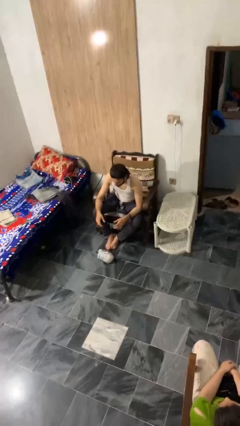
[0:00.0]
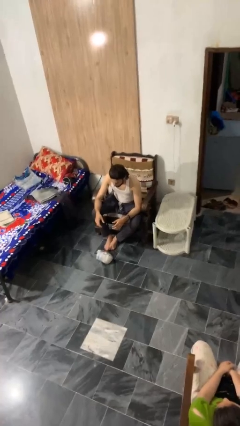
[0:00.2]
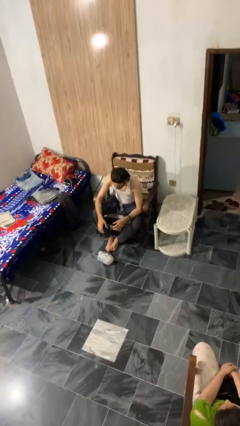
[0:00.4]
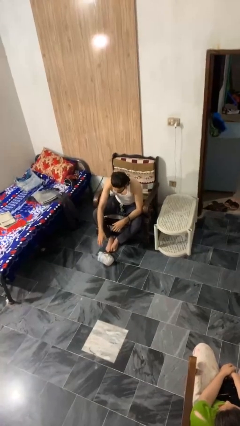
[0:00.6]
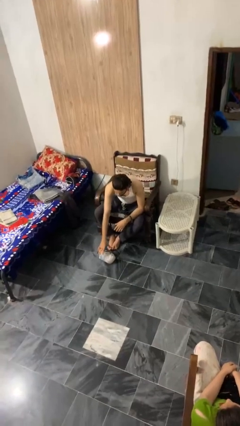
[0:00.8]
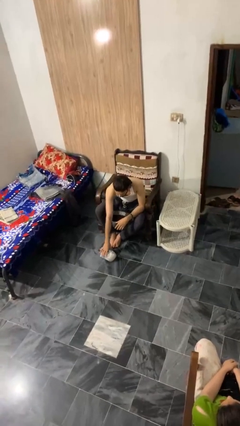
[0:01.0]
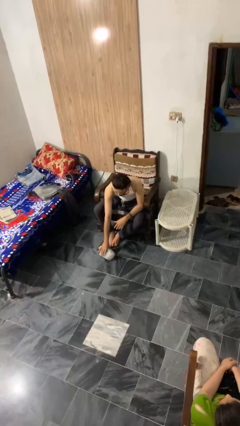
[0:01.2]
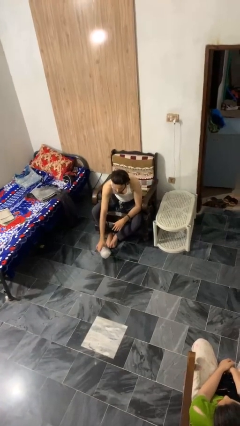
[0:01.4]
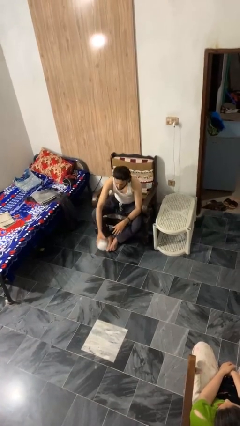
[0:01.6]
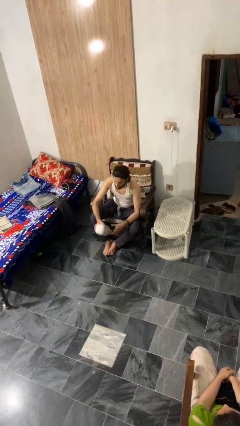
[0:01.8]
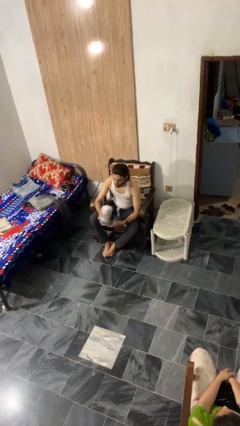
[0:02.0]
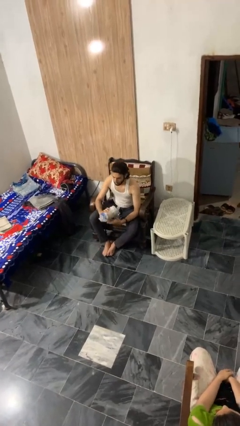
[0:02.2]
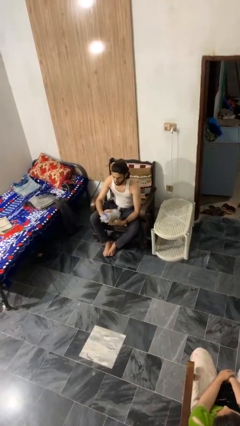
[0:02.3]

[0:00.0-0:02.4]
person picks up object from floor

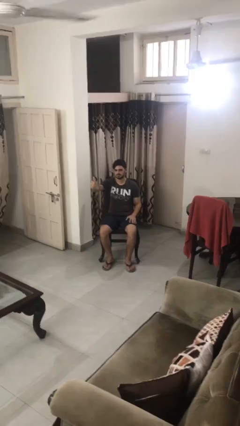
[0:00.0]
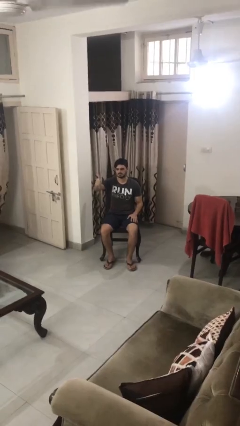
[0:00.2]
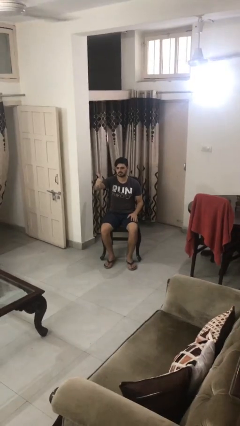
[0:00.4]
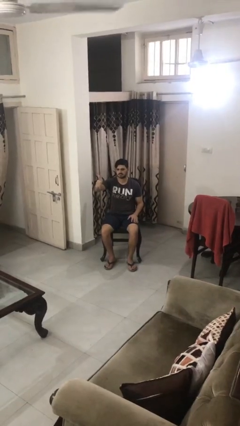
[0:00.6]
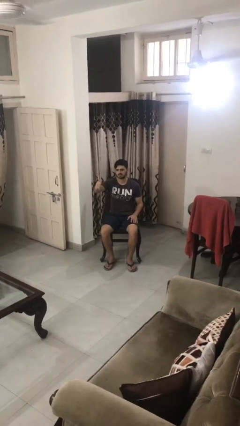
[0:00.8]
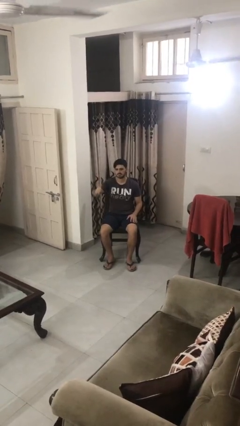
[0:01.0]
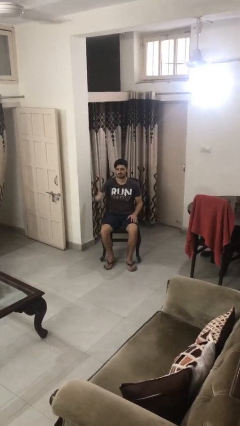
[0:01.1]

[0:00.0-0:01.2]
person gestures thumbs up

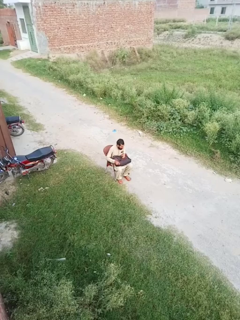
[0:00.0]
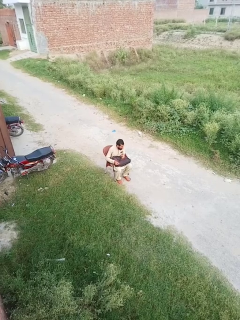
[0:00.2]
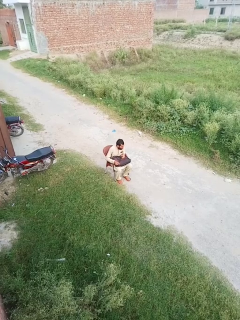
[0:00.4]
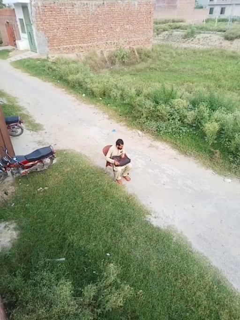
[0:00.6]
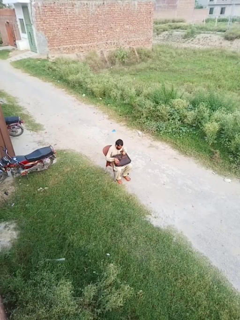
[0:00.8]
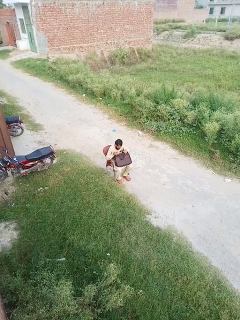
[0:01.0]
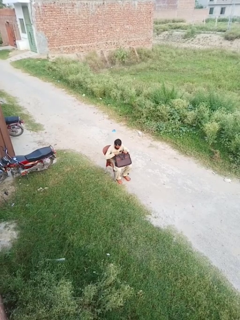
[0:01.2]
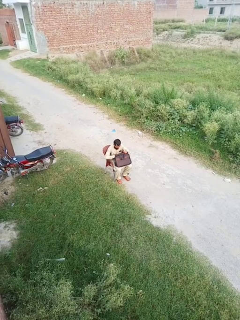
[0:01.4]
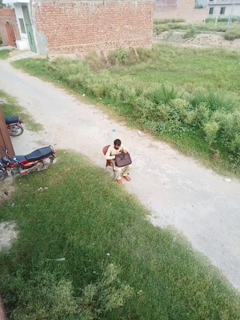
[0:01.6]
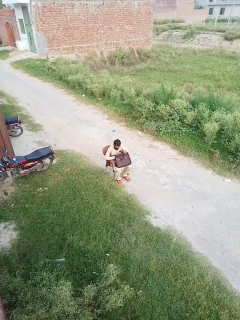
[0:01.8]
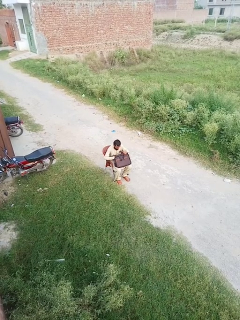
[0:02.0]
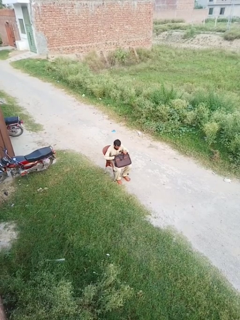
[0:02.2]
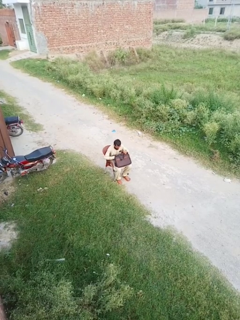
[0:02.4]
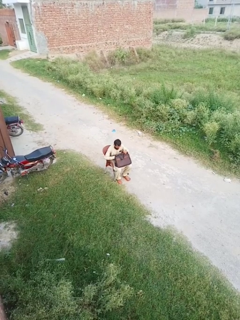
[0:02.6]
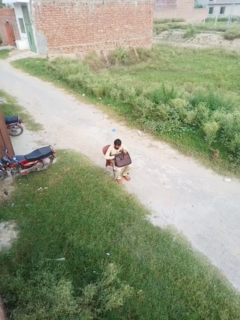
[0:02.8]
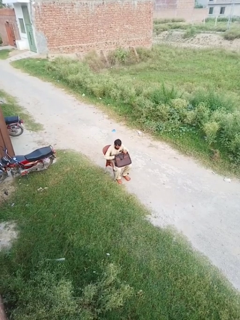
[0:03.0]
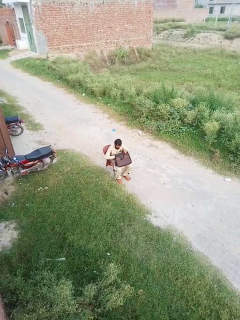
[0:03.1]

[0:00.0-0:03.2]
person searches in bag

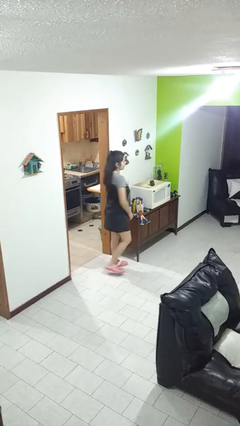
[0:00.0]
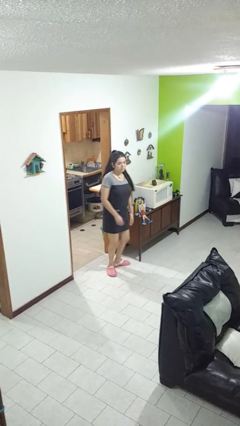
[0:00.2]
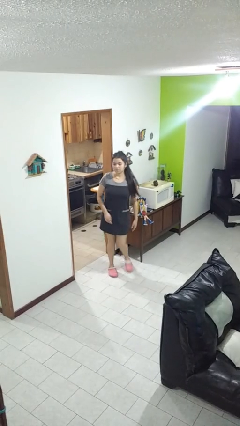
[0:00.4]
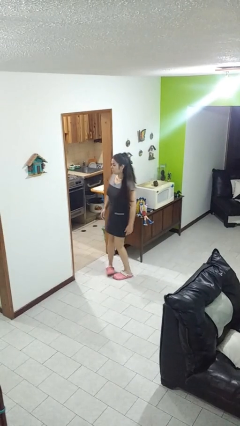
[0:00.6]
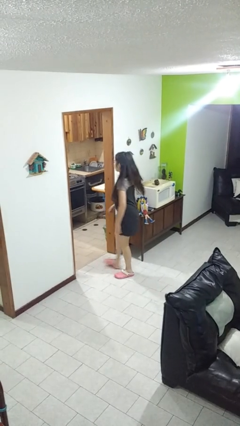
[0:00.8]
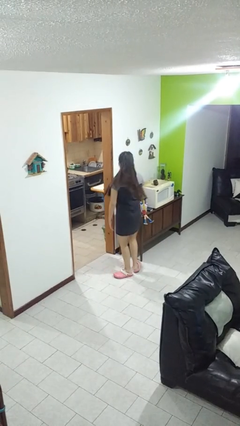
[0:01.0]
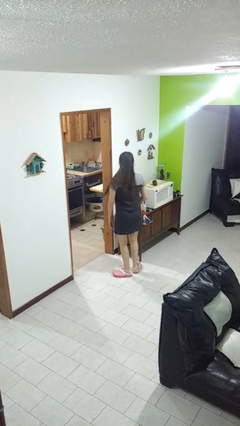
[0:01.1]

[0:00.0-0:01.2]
person twirls

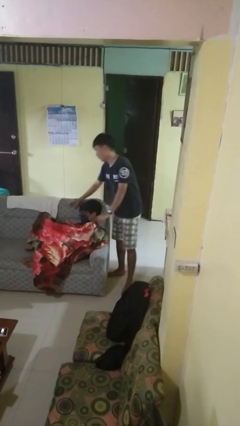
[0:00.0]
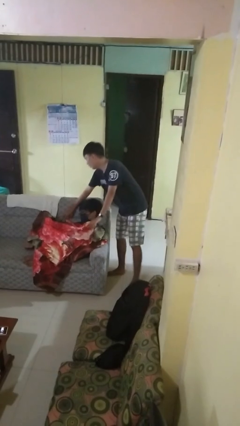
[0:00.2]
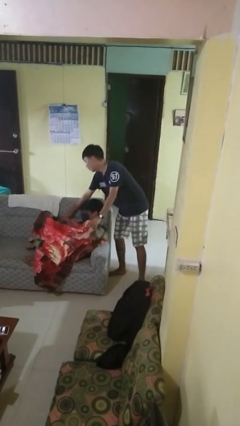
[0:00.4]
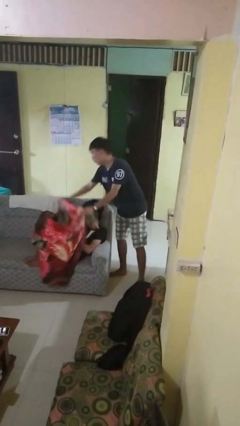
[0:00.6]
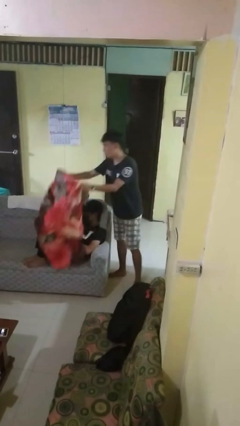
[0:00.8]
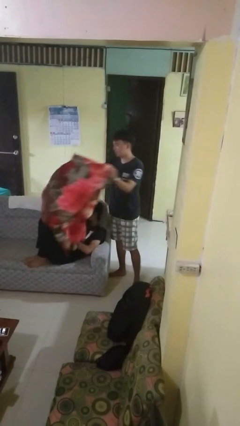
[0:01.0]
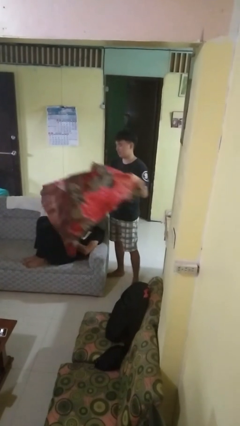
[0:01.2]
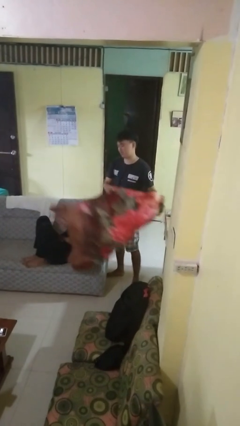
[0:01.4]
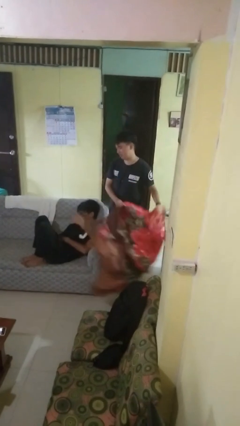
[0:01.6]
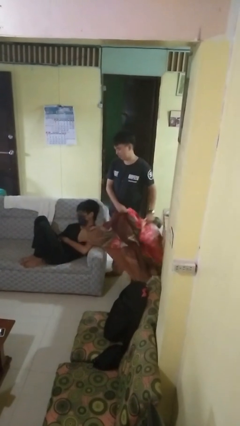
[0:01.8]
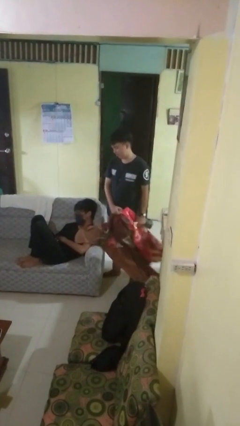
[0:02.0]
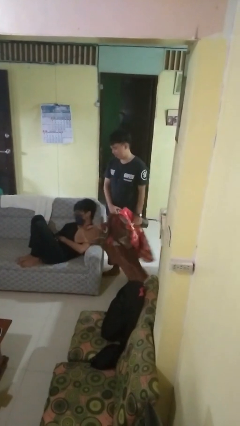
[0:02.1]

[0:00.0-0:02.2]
person uncovers friend with blanket

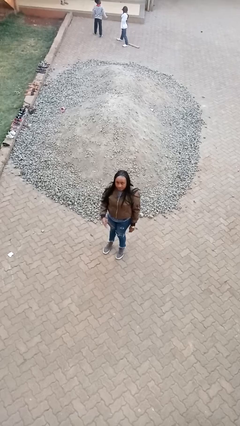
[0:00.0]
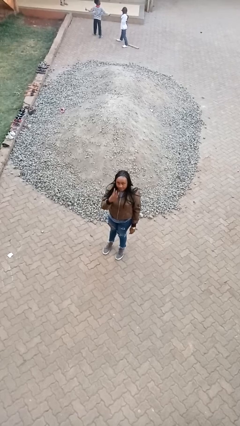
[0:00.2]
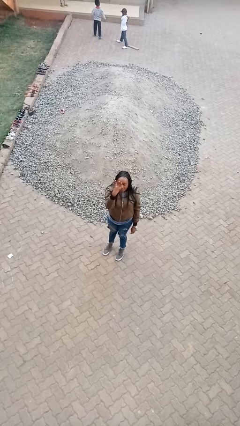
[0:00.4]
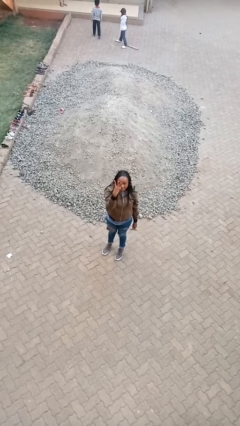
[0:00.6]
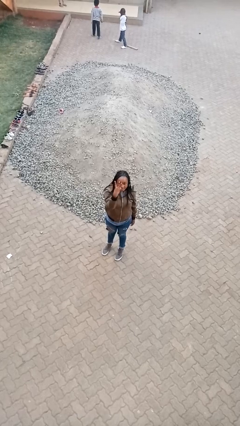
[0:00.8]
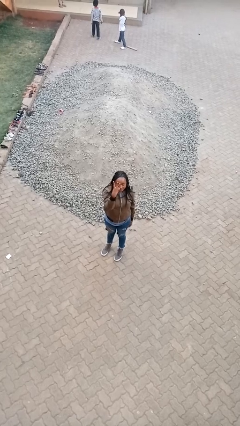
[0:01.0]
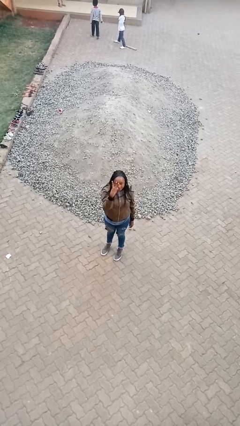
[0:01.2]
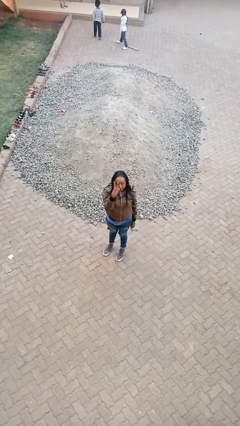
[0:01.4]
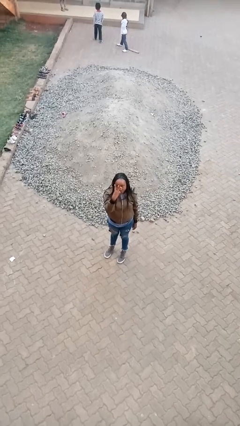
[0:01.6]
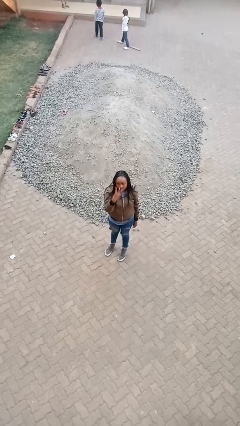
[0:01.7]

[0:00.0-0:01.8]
person gestures number three

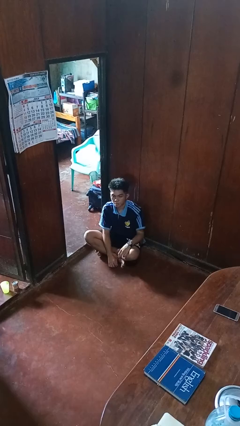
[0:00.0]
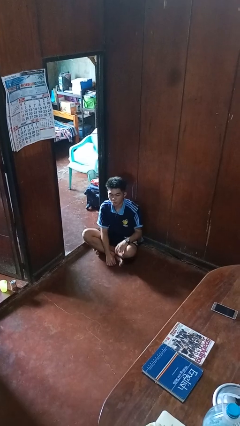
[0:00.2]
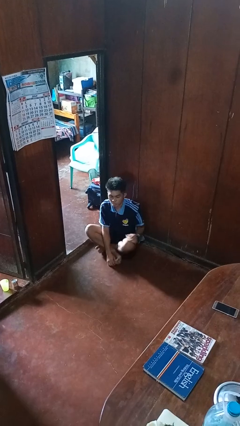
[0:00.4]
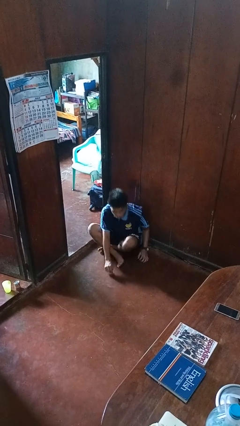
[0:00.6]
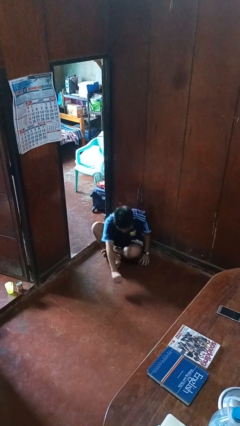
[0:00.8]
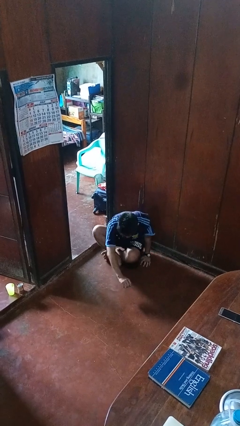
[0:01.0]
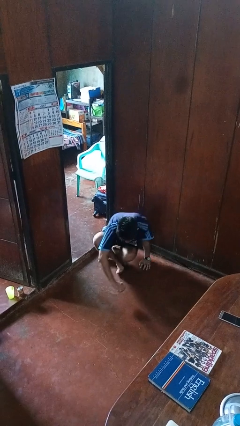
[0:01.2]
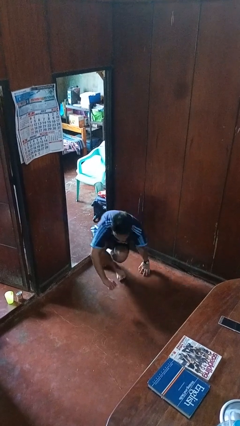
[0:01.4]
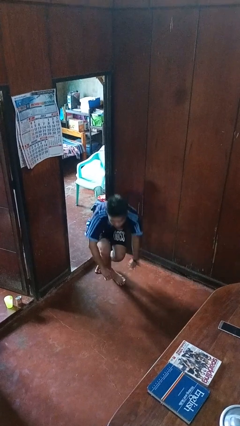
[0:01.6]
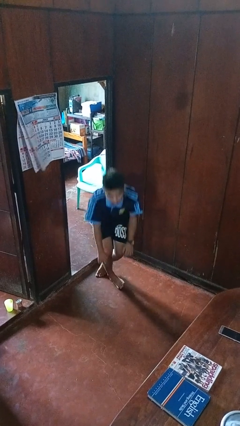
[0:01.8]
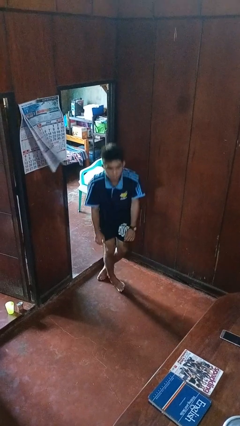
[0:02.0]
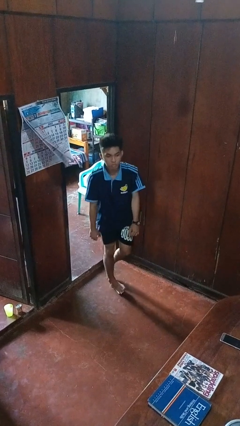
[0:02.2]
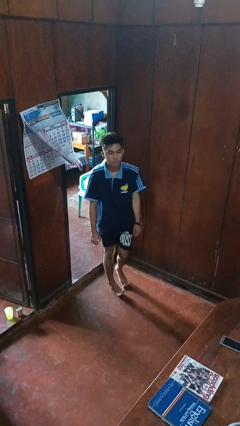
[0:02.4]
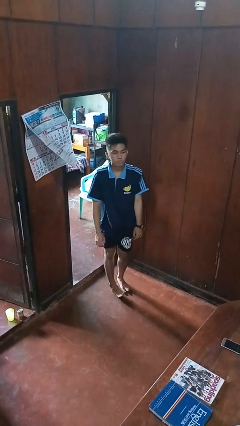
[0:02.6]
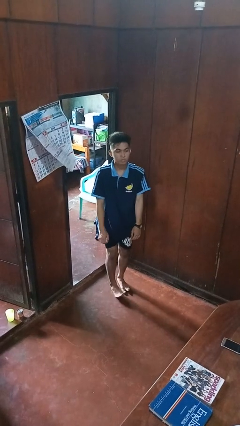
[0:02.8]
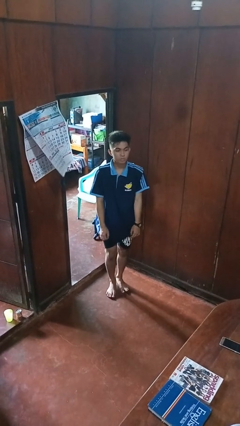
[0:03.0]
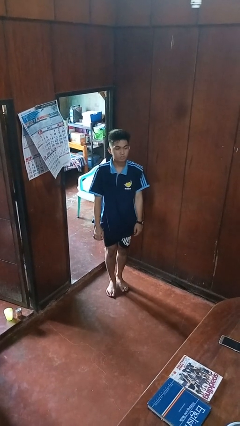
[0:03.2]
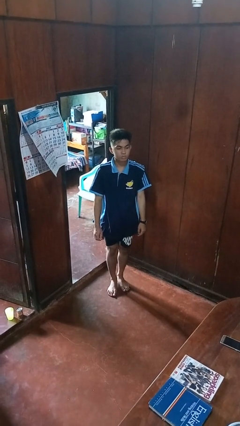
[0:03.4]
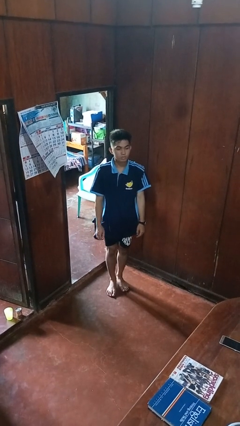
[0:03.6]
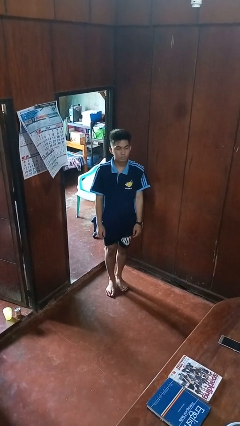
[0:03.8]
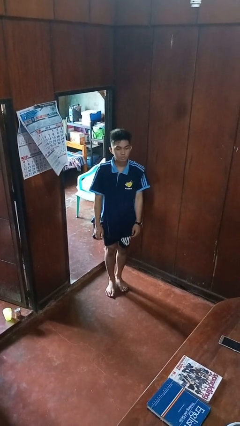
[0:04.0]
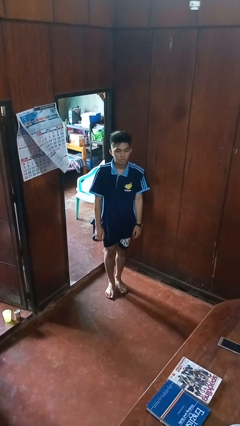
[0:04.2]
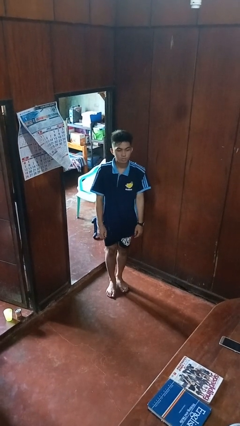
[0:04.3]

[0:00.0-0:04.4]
person stands up from floor
